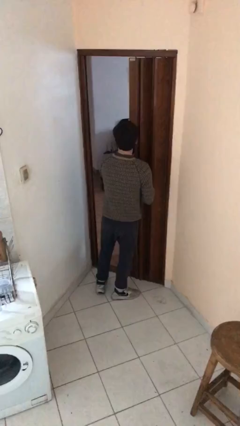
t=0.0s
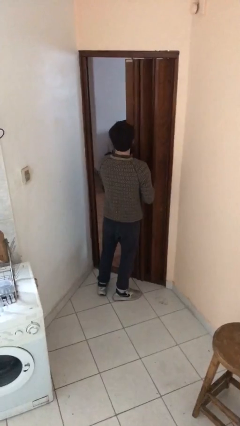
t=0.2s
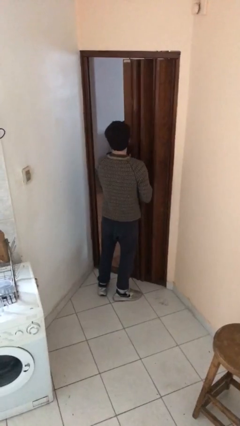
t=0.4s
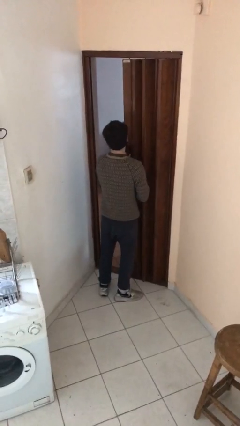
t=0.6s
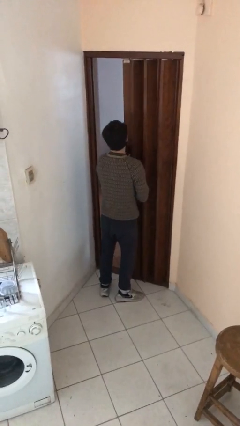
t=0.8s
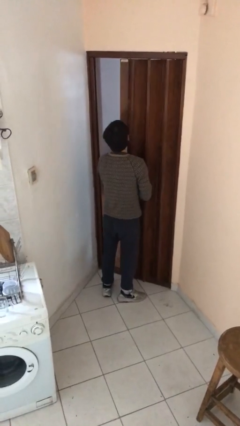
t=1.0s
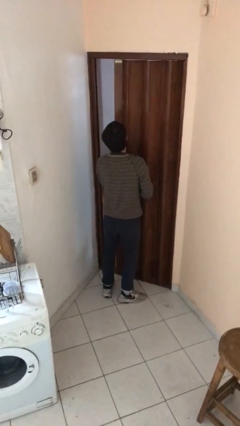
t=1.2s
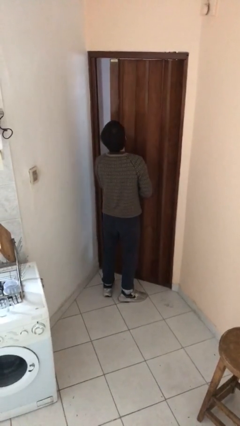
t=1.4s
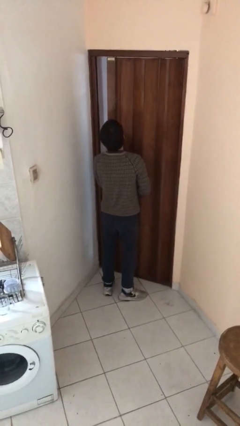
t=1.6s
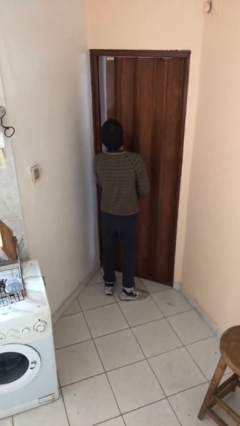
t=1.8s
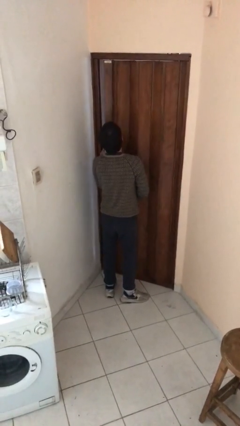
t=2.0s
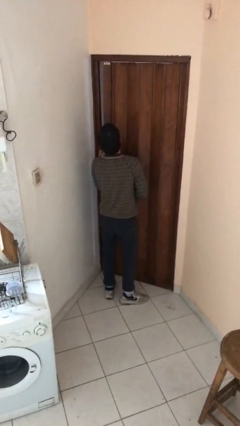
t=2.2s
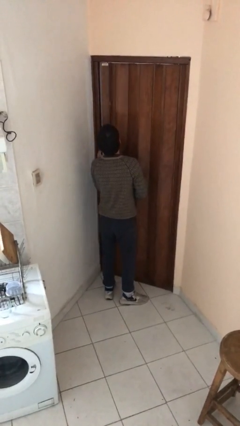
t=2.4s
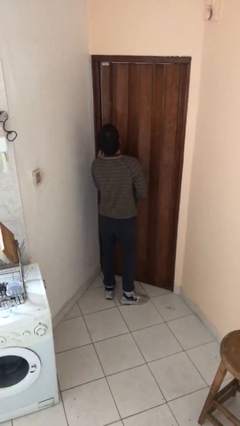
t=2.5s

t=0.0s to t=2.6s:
person closes sliding door

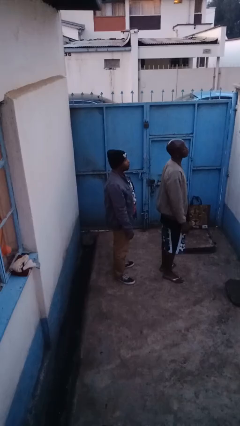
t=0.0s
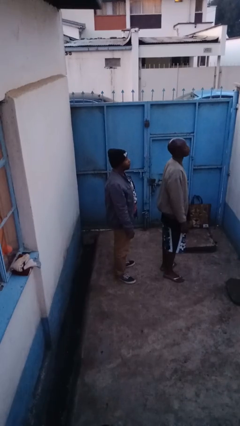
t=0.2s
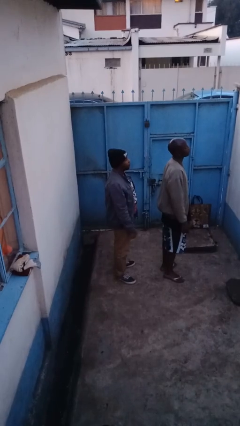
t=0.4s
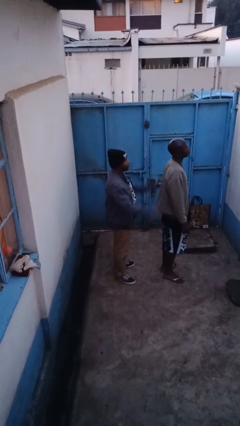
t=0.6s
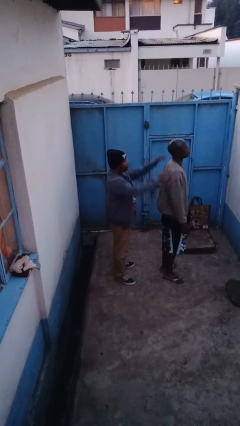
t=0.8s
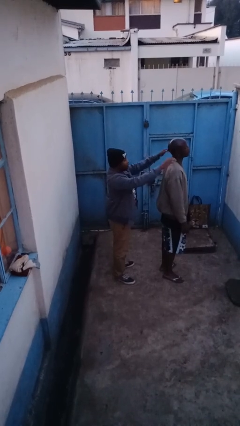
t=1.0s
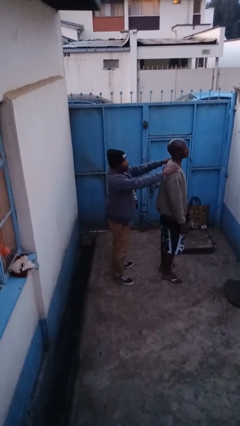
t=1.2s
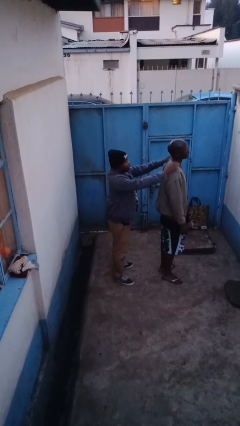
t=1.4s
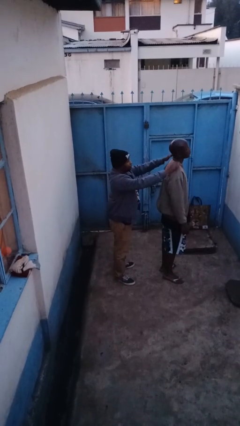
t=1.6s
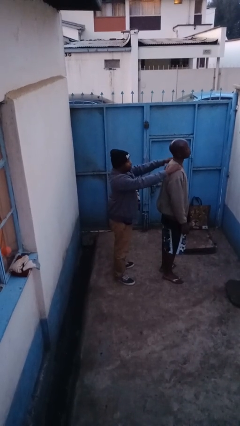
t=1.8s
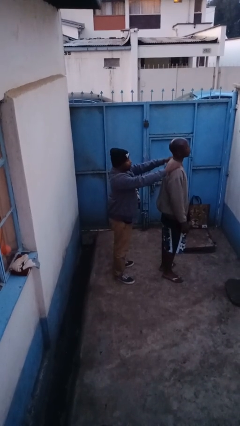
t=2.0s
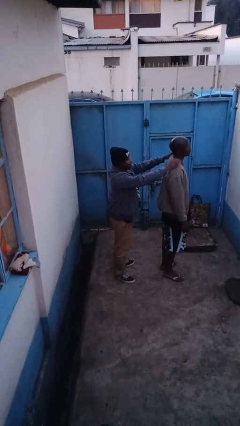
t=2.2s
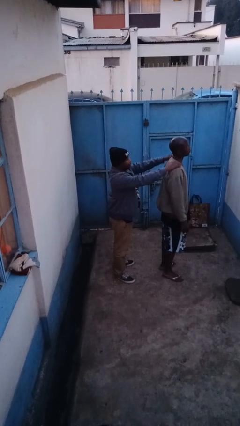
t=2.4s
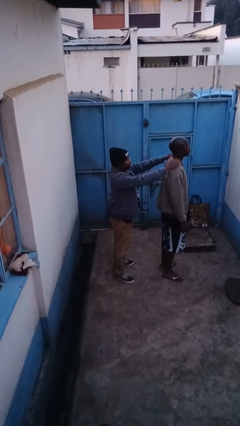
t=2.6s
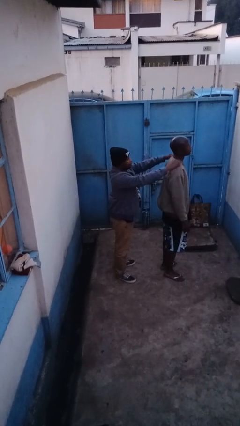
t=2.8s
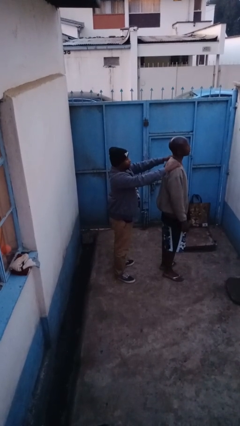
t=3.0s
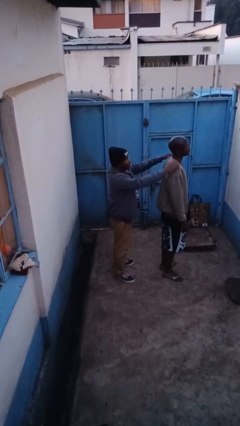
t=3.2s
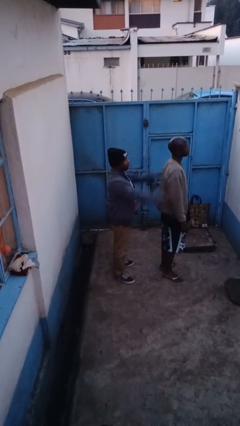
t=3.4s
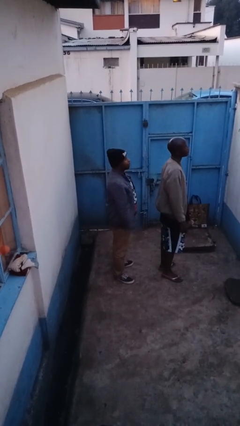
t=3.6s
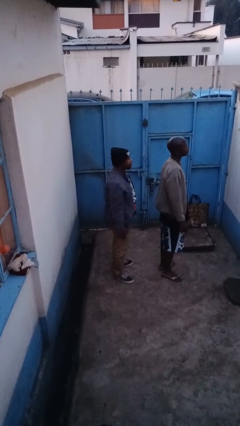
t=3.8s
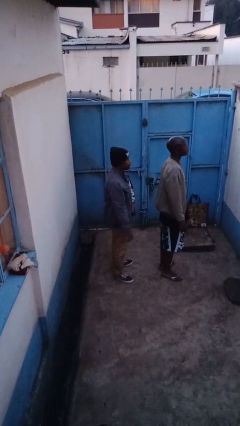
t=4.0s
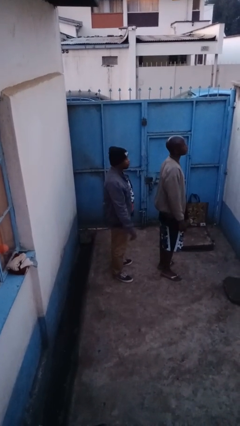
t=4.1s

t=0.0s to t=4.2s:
person pounds shoulders of person

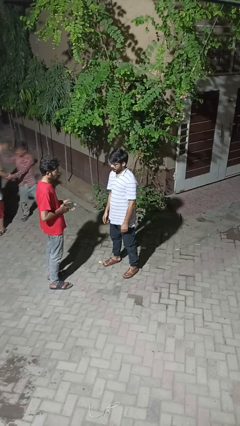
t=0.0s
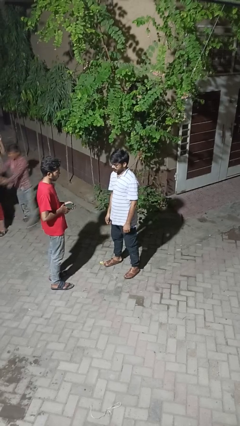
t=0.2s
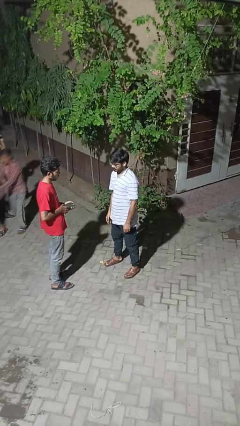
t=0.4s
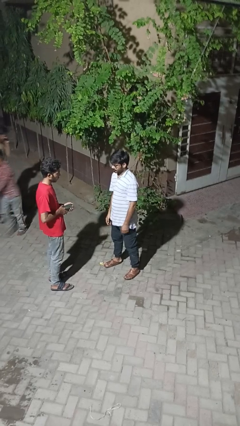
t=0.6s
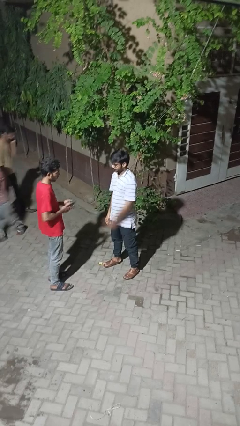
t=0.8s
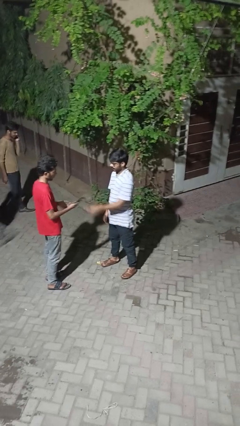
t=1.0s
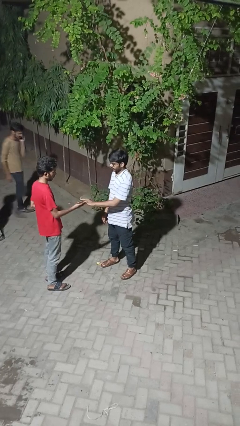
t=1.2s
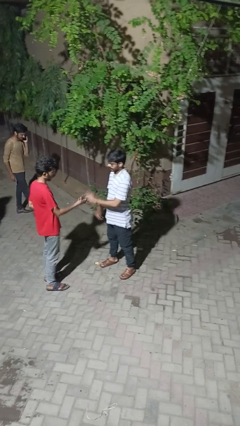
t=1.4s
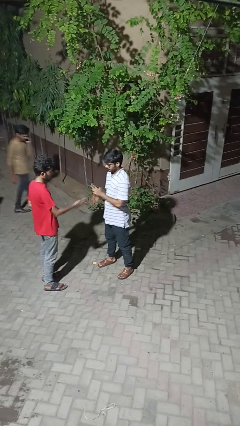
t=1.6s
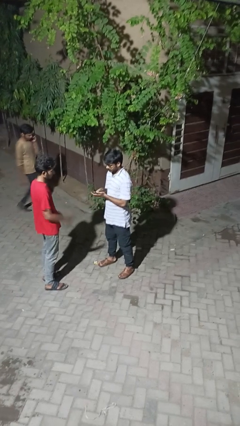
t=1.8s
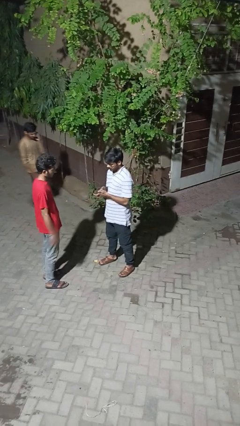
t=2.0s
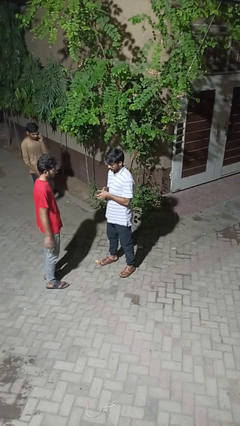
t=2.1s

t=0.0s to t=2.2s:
person transfers object to person

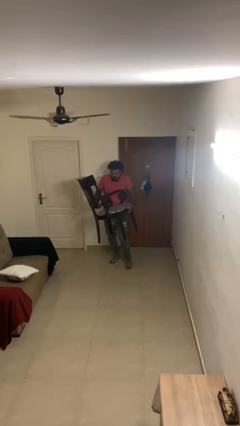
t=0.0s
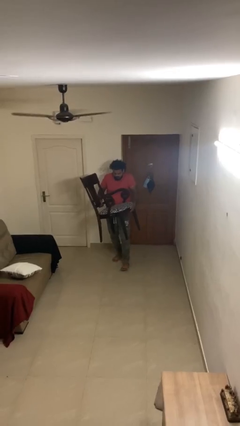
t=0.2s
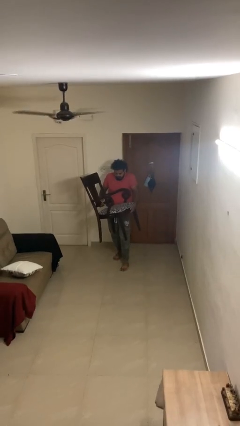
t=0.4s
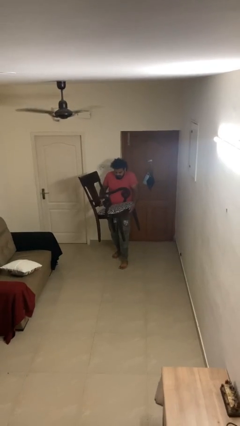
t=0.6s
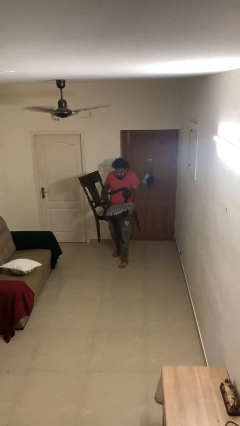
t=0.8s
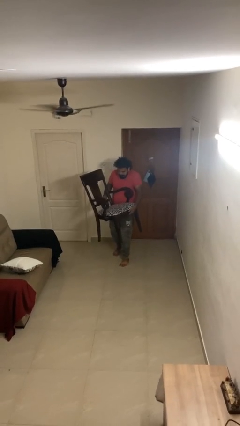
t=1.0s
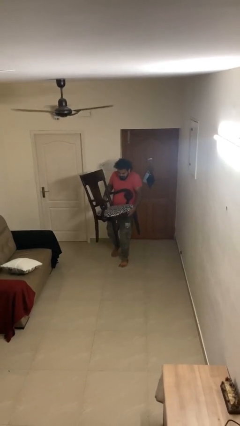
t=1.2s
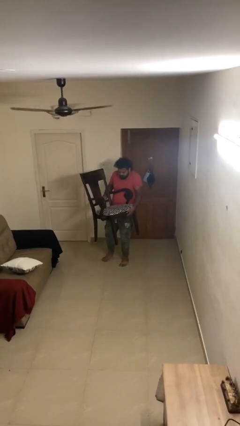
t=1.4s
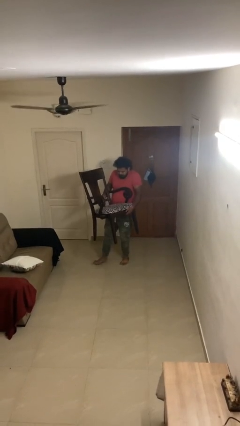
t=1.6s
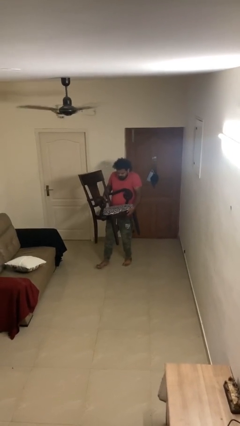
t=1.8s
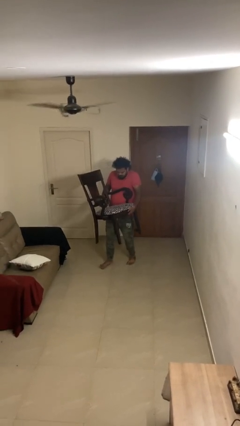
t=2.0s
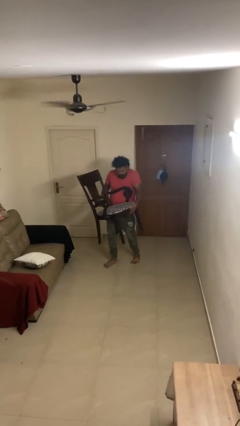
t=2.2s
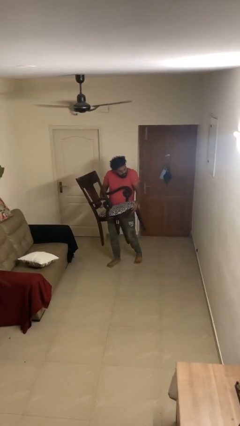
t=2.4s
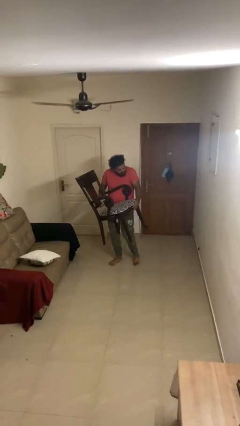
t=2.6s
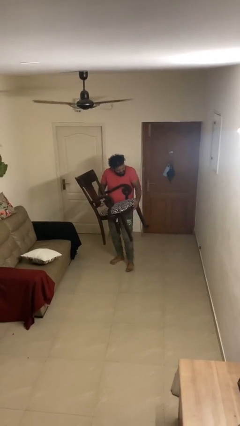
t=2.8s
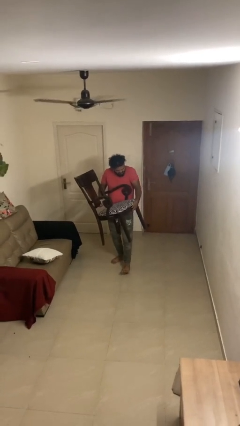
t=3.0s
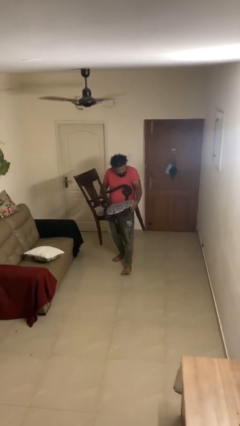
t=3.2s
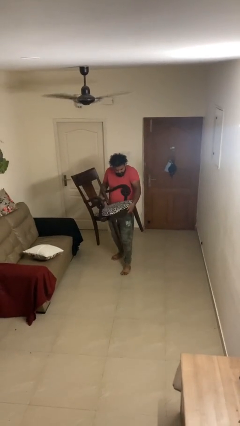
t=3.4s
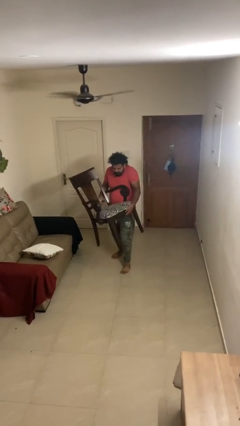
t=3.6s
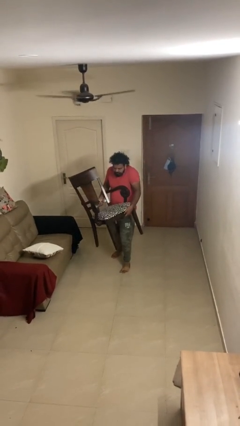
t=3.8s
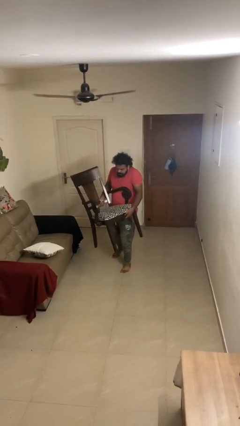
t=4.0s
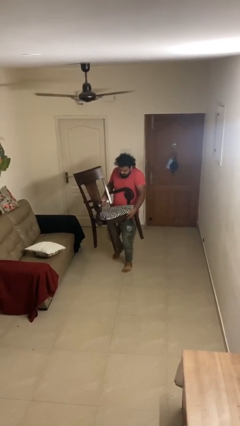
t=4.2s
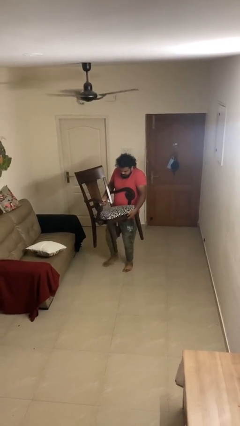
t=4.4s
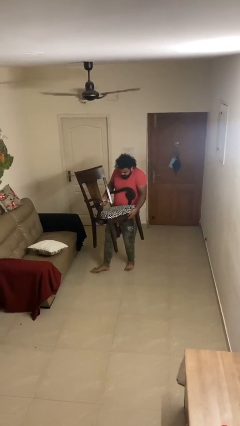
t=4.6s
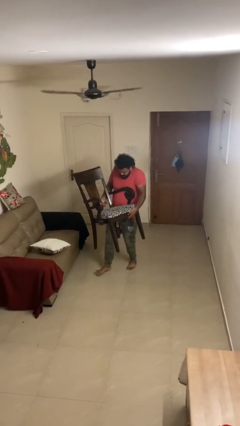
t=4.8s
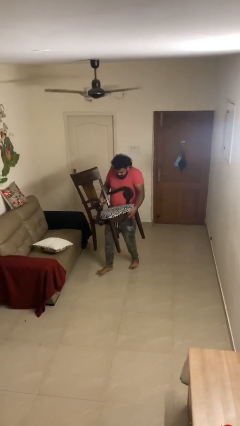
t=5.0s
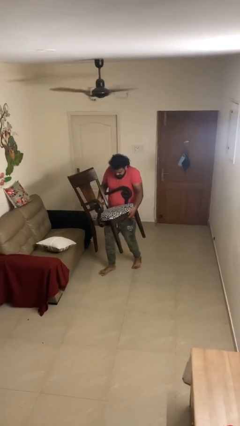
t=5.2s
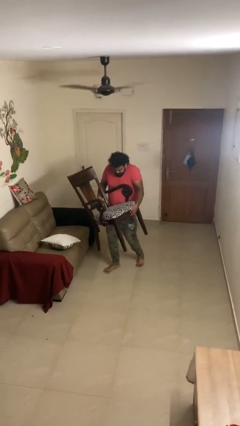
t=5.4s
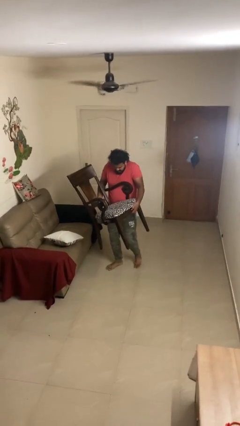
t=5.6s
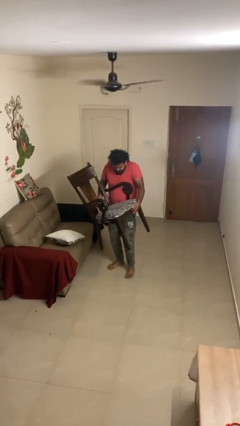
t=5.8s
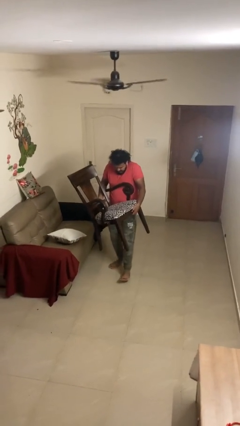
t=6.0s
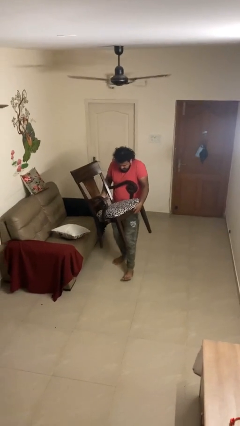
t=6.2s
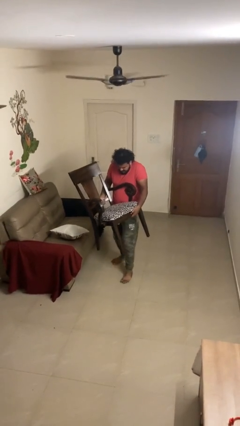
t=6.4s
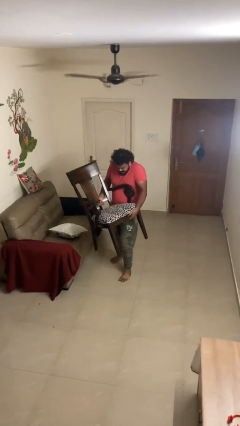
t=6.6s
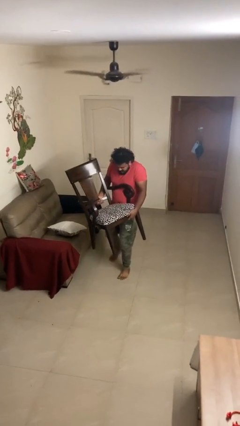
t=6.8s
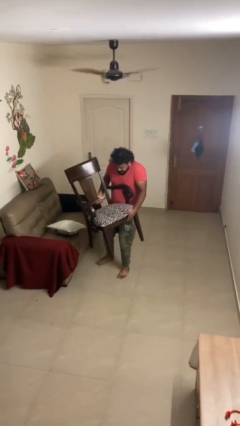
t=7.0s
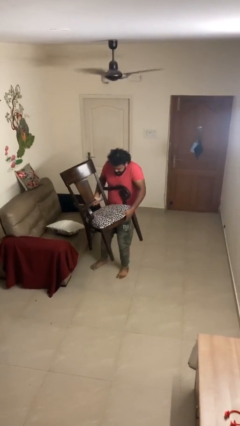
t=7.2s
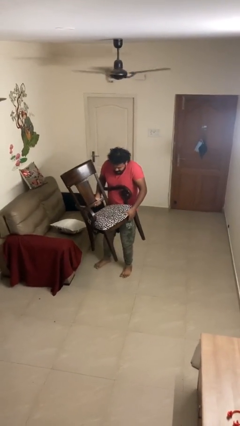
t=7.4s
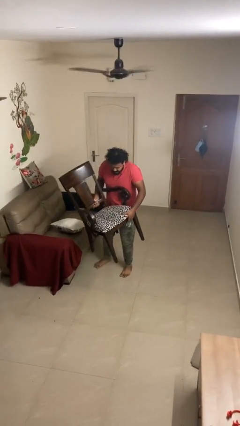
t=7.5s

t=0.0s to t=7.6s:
person carries heavy object

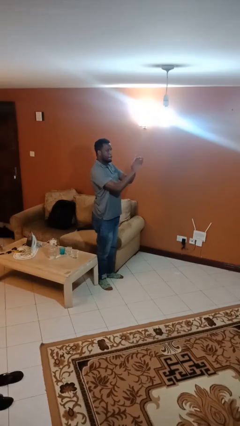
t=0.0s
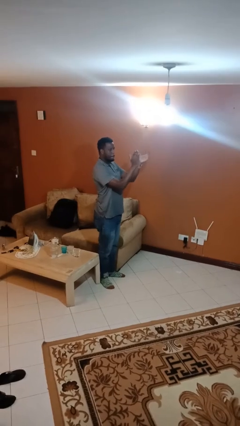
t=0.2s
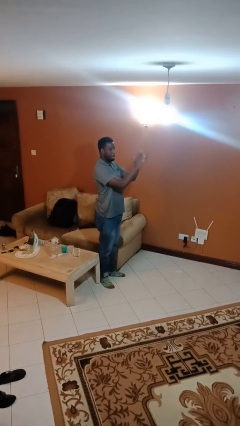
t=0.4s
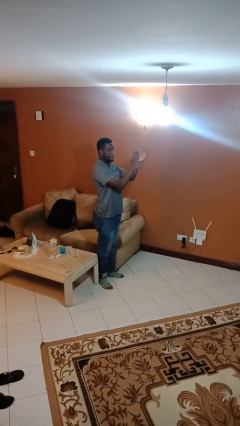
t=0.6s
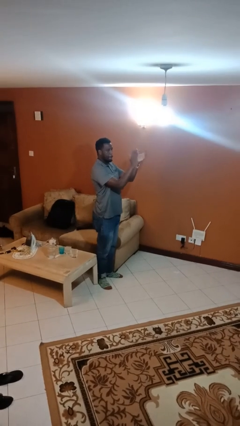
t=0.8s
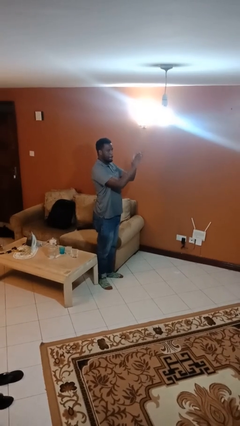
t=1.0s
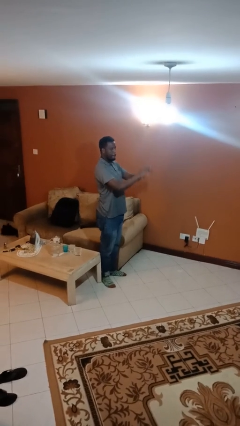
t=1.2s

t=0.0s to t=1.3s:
person claps hands
